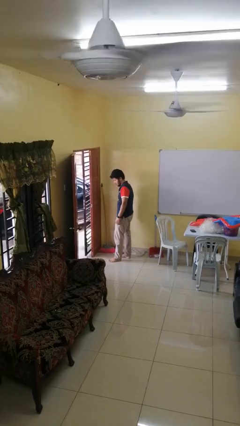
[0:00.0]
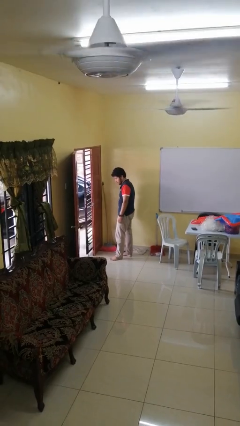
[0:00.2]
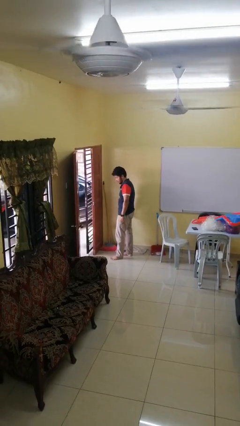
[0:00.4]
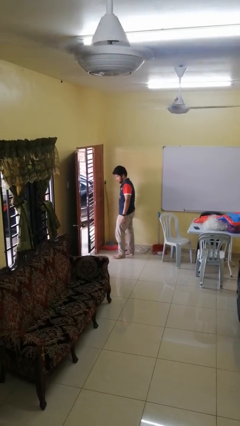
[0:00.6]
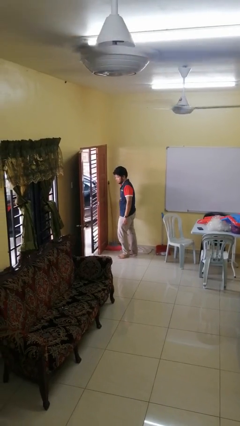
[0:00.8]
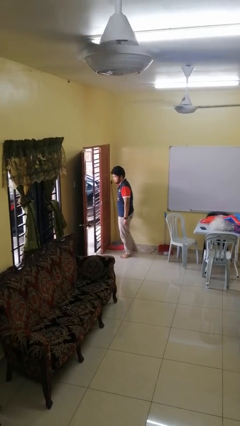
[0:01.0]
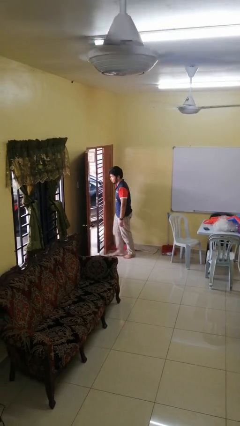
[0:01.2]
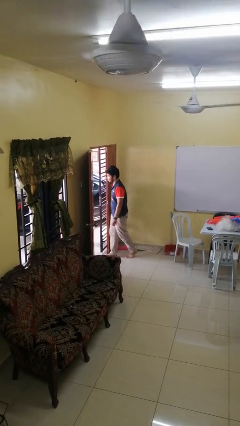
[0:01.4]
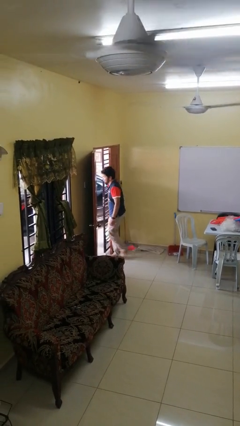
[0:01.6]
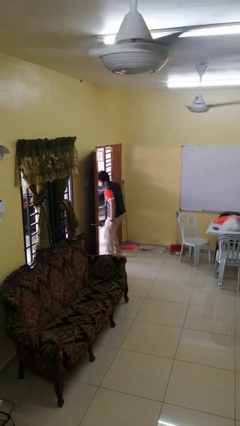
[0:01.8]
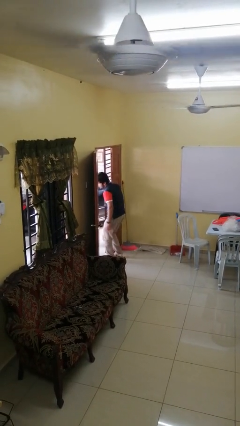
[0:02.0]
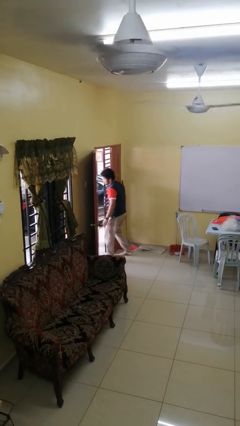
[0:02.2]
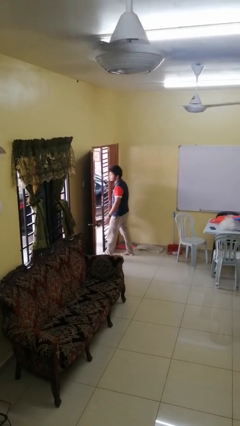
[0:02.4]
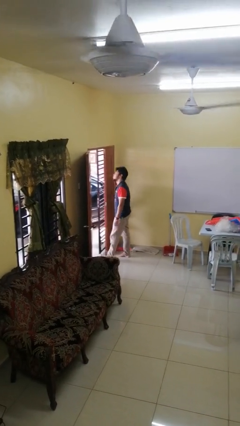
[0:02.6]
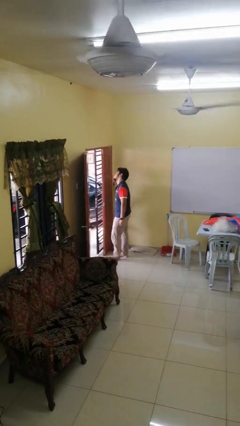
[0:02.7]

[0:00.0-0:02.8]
person bumps into wall

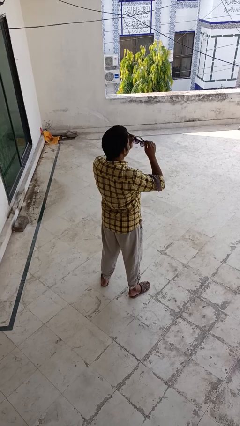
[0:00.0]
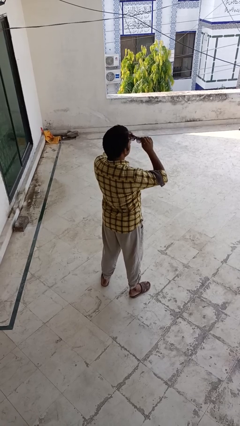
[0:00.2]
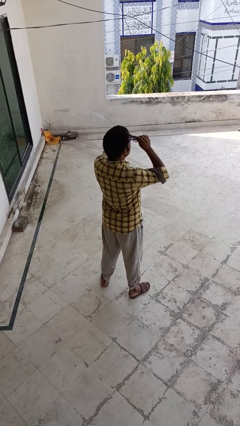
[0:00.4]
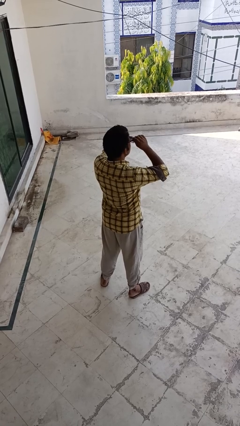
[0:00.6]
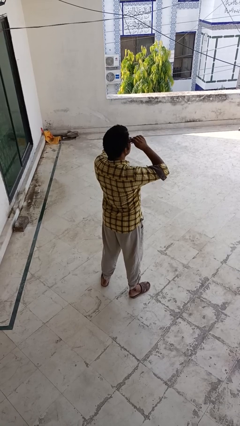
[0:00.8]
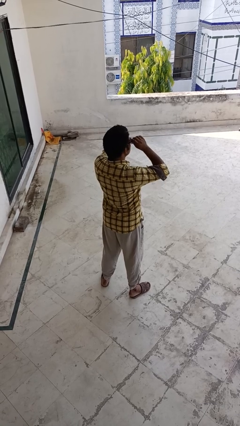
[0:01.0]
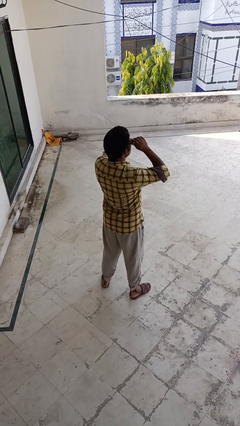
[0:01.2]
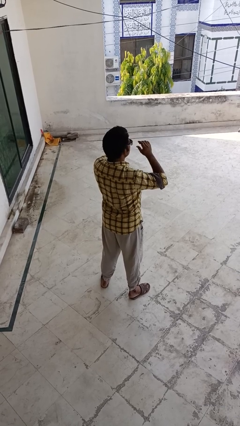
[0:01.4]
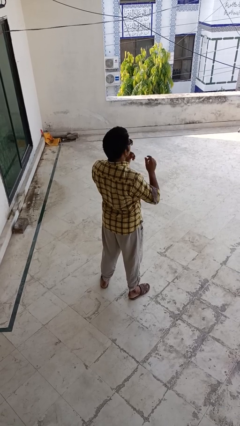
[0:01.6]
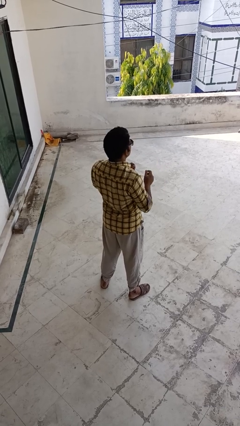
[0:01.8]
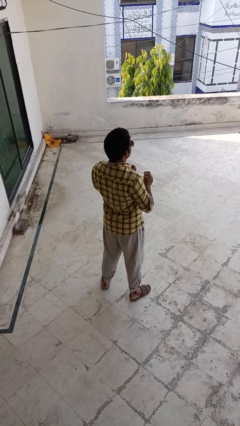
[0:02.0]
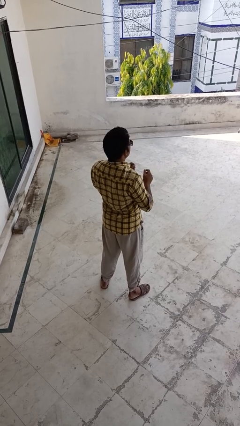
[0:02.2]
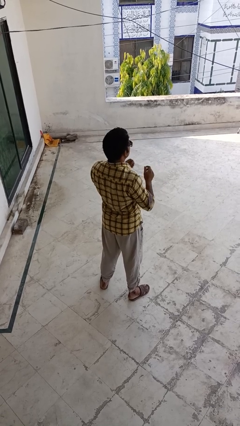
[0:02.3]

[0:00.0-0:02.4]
person puts on sunglasses

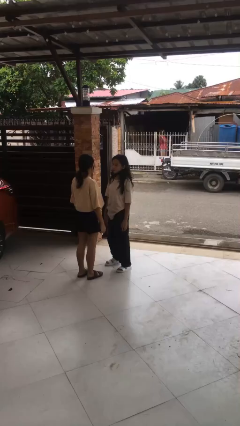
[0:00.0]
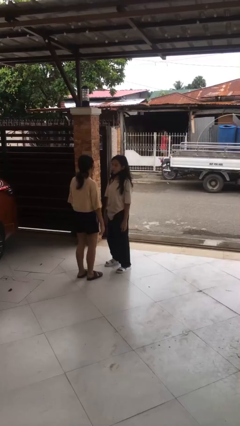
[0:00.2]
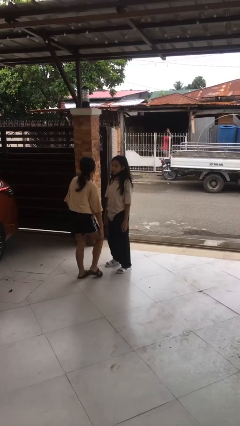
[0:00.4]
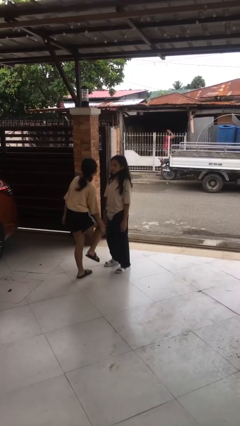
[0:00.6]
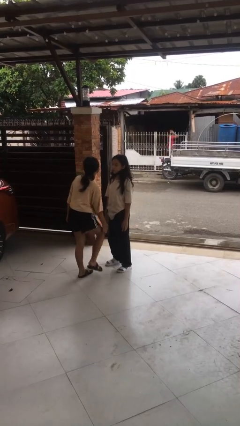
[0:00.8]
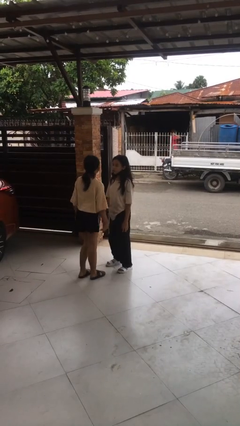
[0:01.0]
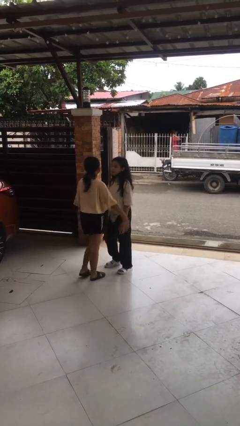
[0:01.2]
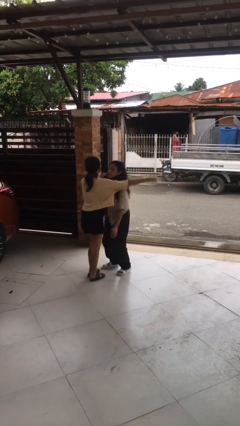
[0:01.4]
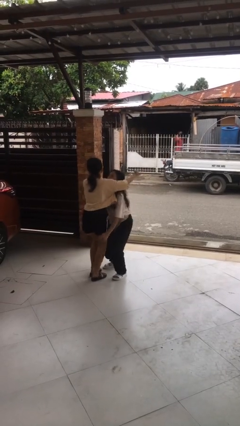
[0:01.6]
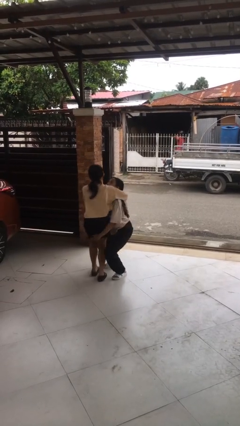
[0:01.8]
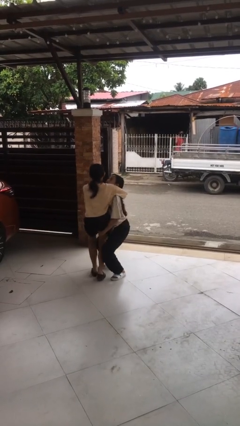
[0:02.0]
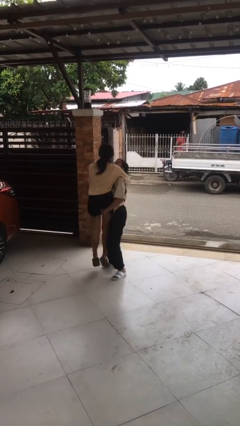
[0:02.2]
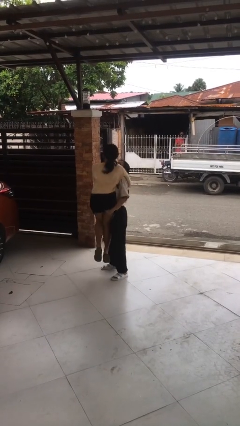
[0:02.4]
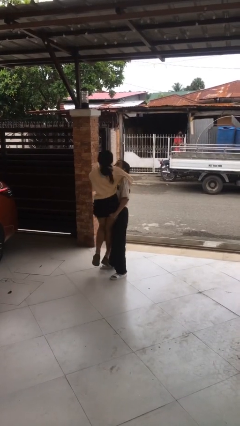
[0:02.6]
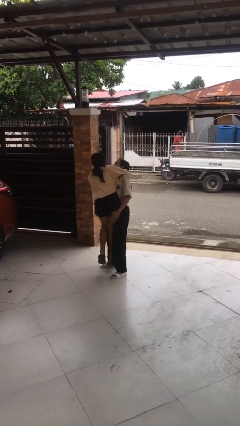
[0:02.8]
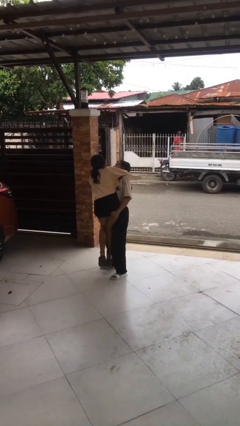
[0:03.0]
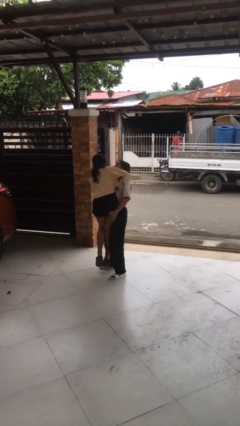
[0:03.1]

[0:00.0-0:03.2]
person picks up person

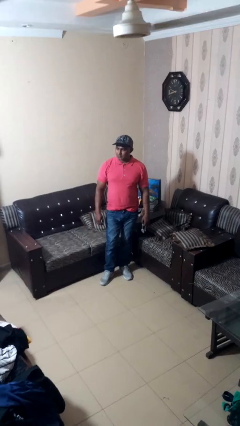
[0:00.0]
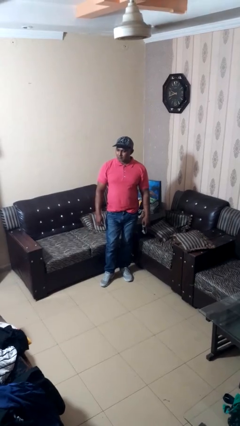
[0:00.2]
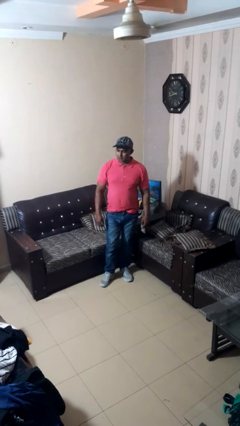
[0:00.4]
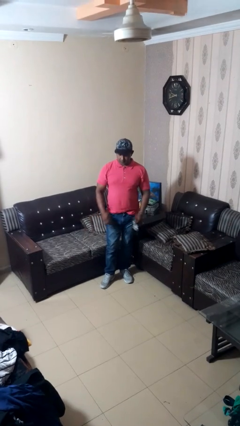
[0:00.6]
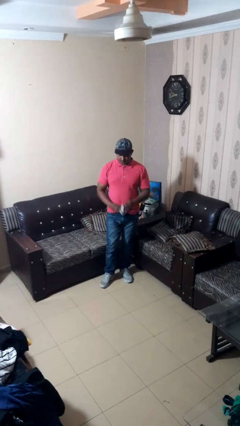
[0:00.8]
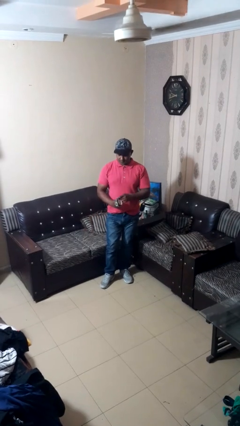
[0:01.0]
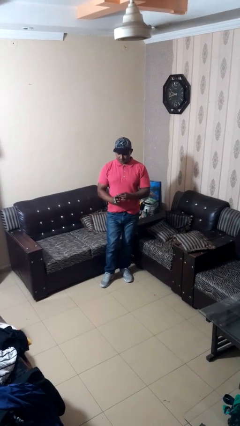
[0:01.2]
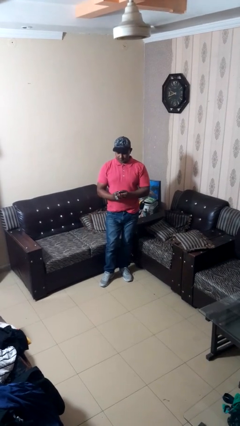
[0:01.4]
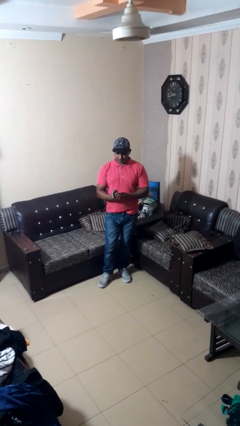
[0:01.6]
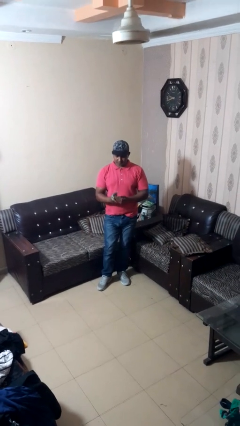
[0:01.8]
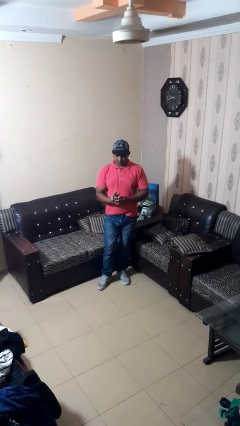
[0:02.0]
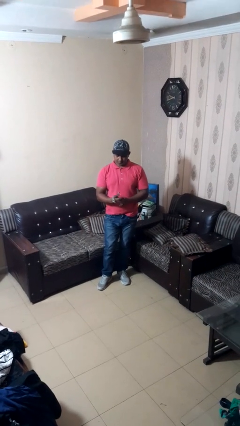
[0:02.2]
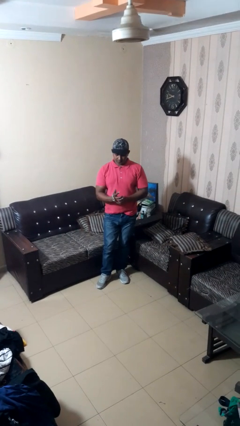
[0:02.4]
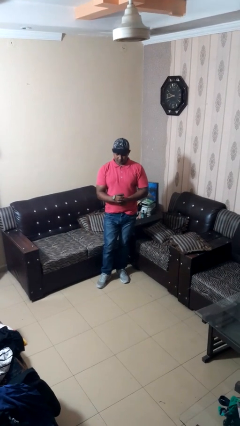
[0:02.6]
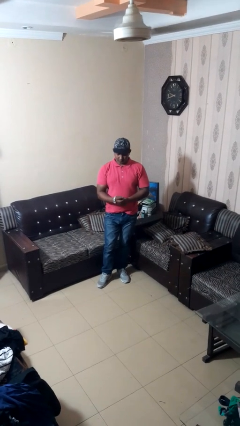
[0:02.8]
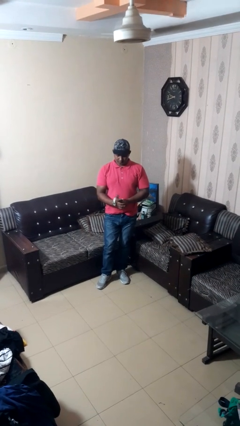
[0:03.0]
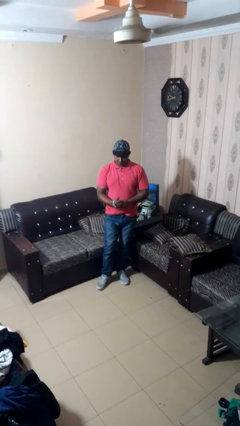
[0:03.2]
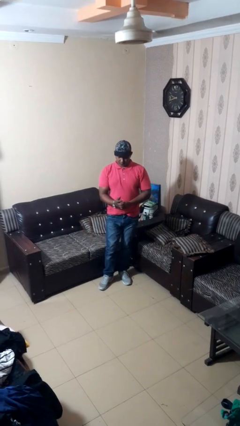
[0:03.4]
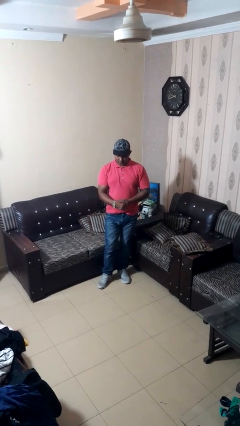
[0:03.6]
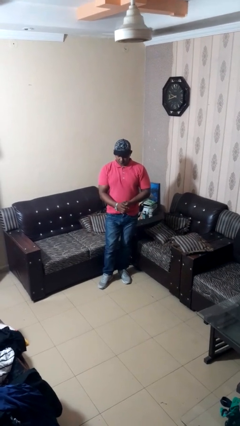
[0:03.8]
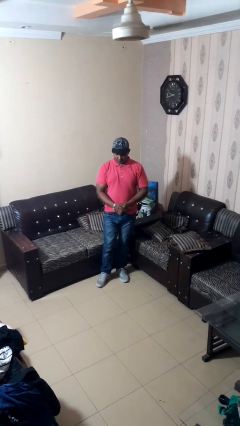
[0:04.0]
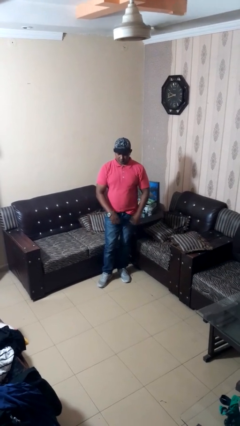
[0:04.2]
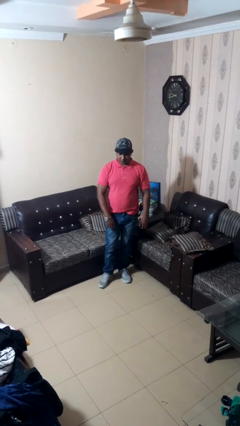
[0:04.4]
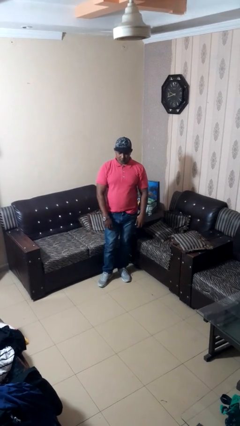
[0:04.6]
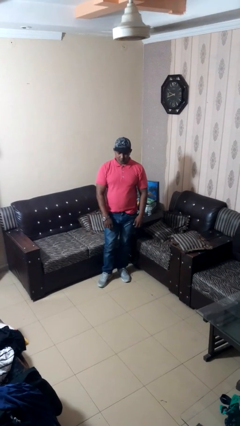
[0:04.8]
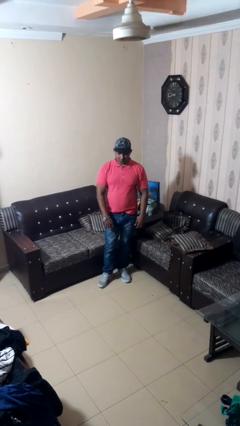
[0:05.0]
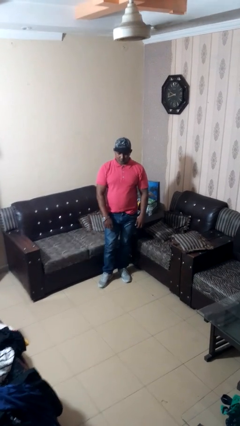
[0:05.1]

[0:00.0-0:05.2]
person puts on wristwatch

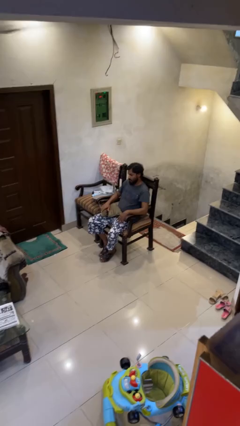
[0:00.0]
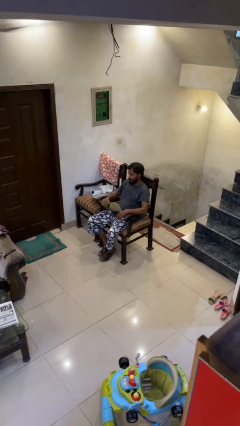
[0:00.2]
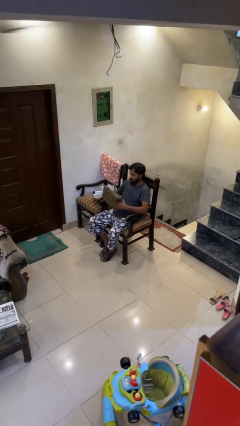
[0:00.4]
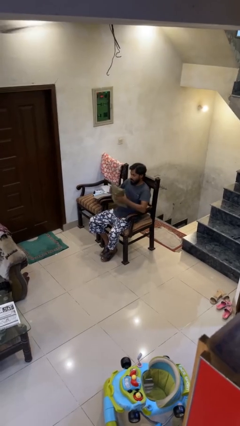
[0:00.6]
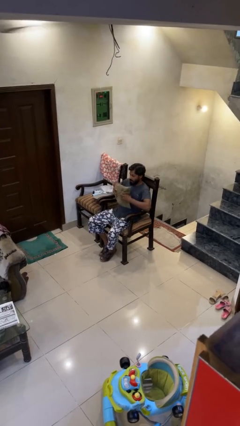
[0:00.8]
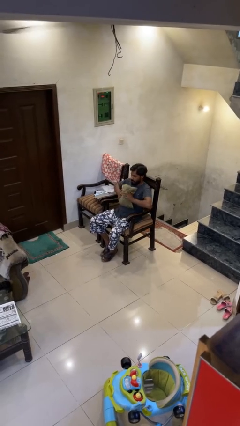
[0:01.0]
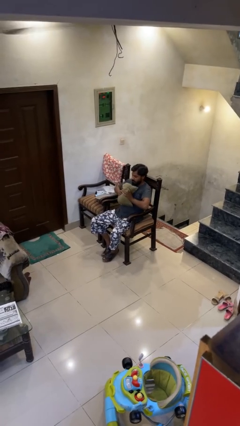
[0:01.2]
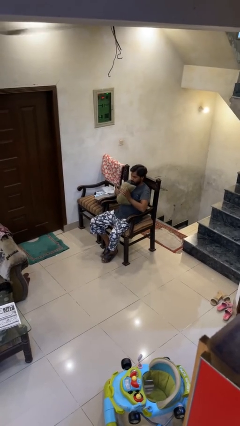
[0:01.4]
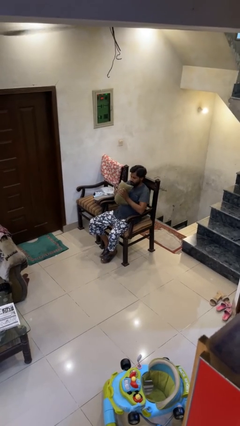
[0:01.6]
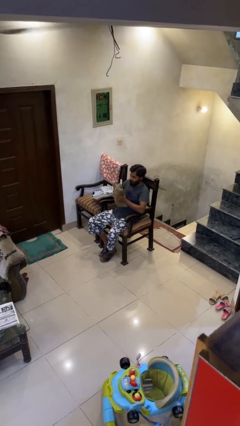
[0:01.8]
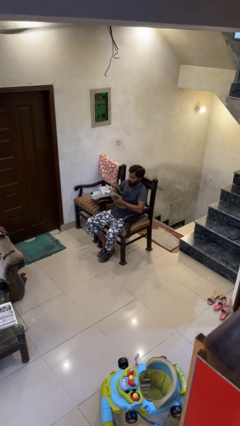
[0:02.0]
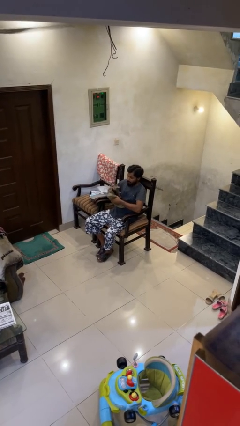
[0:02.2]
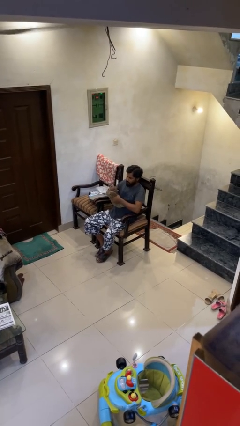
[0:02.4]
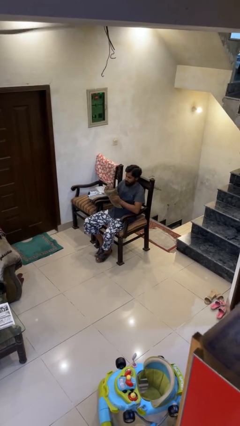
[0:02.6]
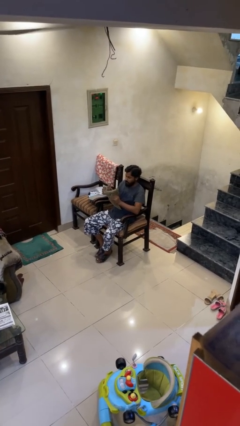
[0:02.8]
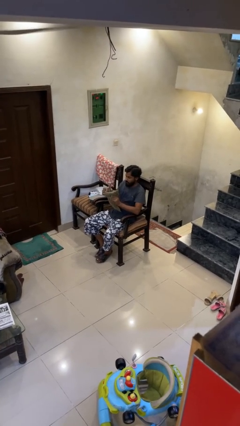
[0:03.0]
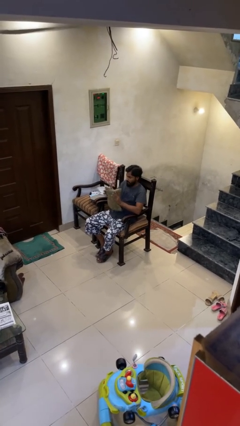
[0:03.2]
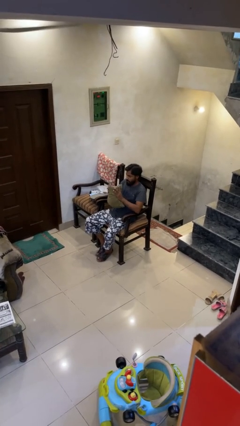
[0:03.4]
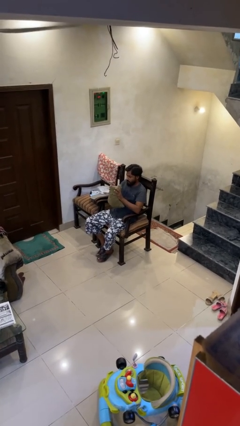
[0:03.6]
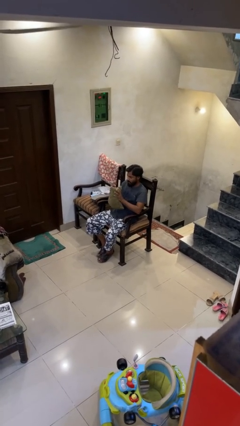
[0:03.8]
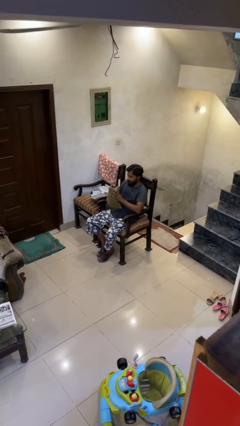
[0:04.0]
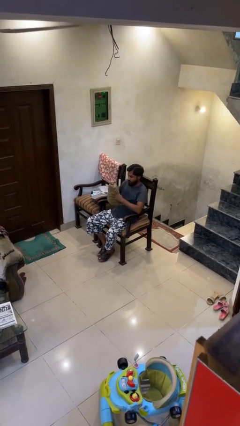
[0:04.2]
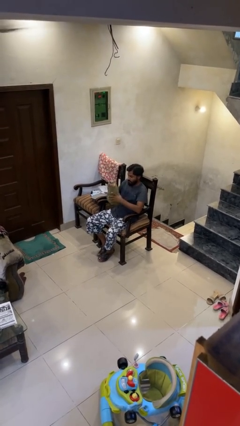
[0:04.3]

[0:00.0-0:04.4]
person squeezes object
